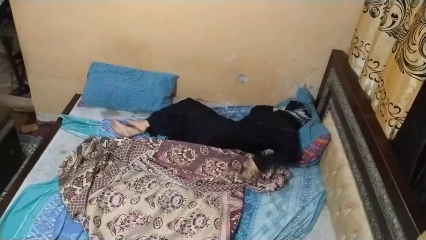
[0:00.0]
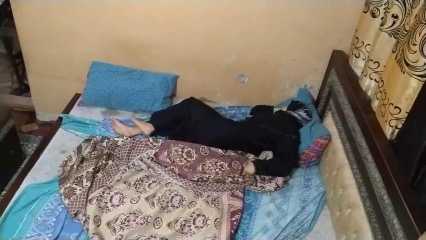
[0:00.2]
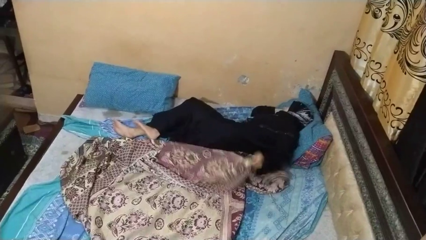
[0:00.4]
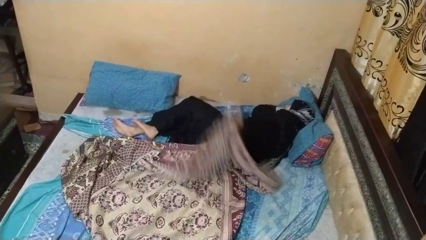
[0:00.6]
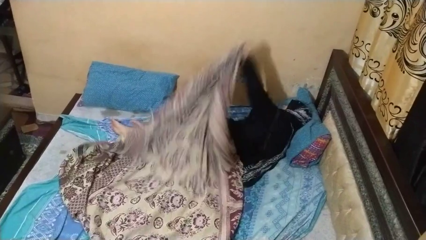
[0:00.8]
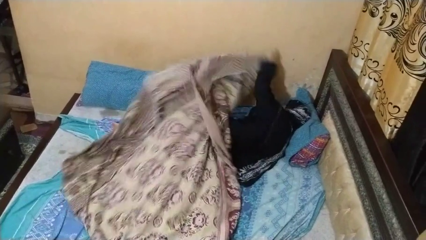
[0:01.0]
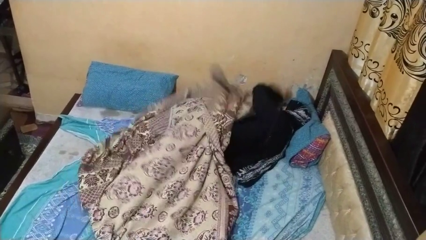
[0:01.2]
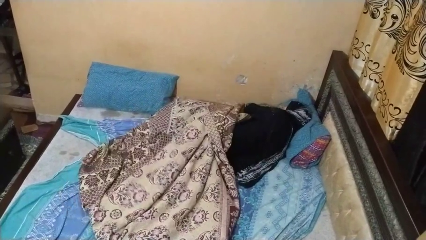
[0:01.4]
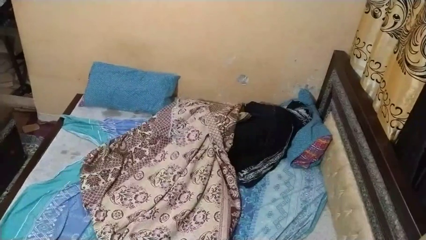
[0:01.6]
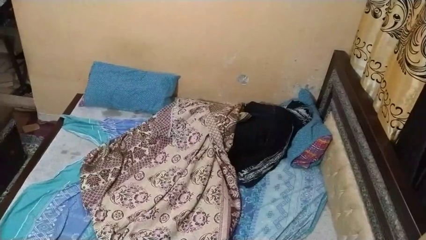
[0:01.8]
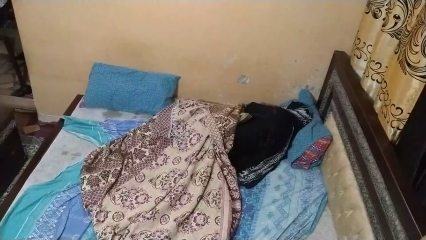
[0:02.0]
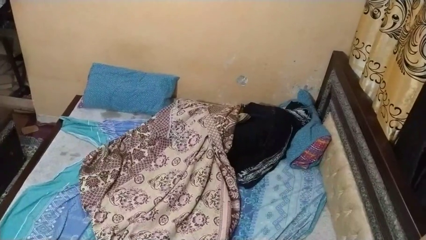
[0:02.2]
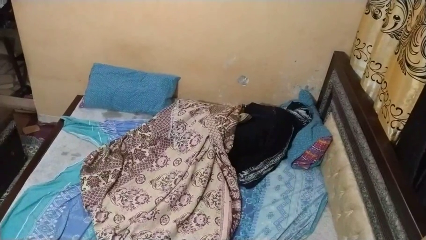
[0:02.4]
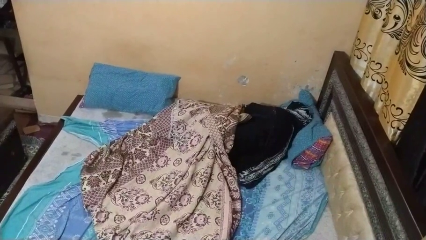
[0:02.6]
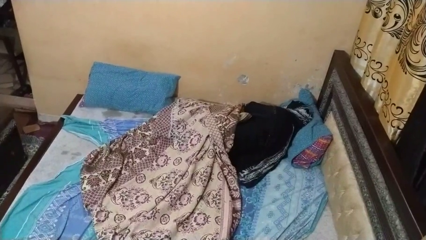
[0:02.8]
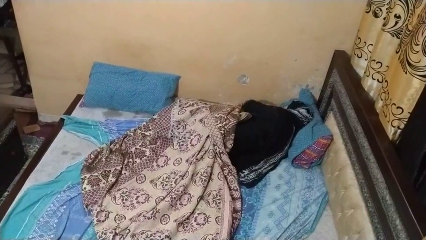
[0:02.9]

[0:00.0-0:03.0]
person covers with blanket

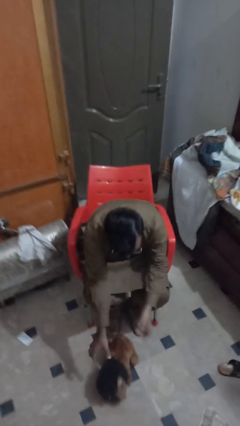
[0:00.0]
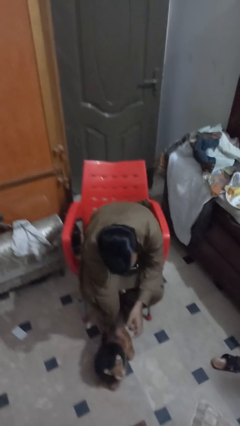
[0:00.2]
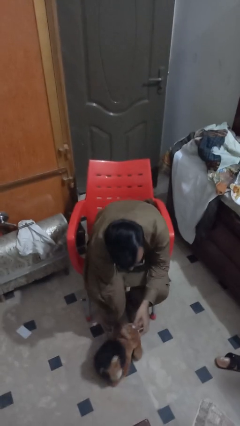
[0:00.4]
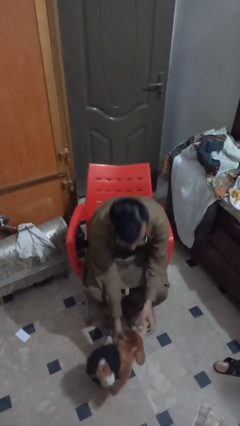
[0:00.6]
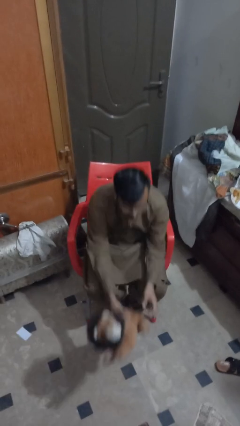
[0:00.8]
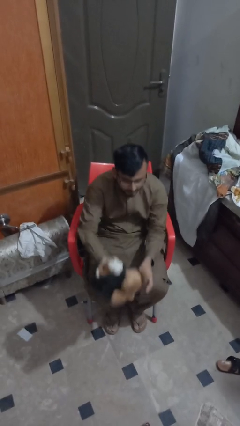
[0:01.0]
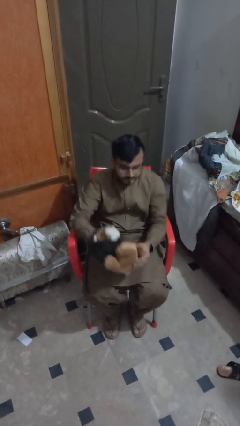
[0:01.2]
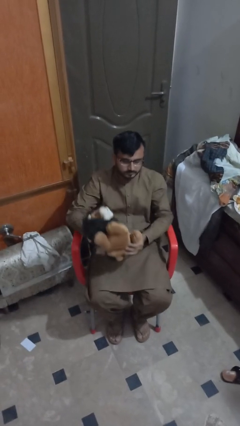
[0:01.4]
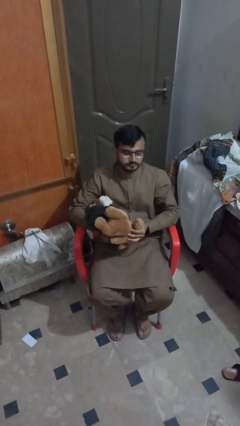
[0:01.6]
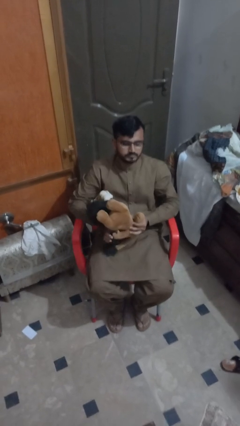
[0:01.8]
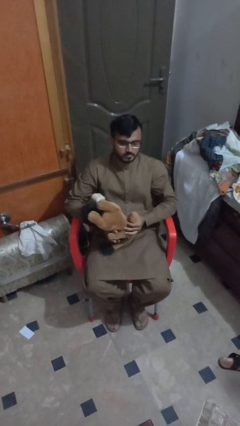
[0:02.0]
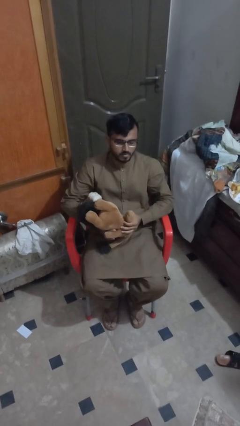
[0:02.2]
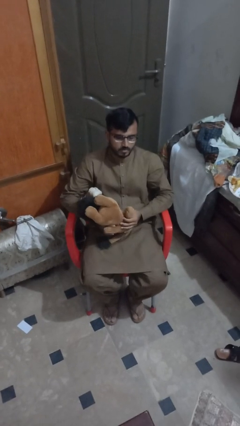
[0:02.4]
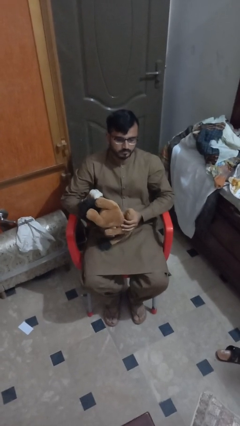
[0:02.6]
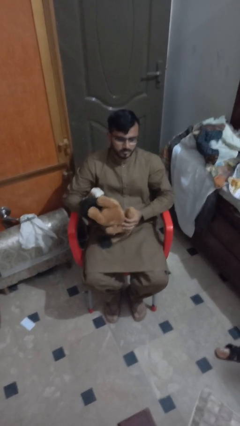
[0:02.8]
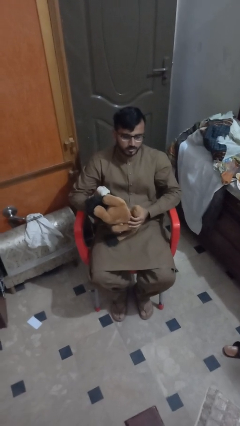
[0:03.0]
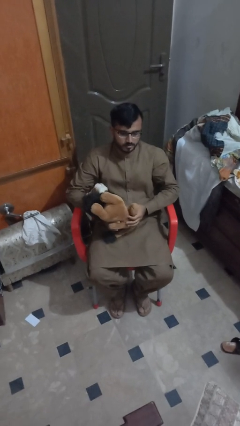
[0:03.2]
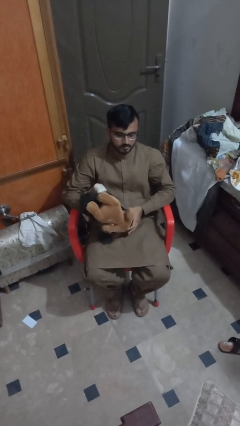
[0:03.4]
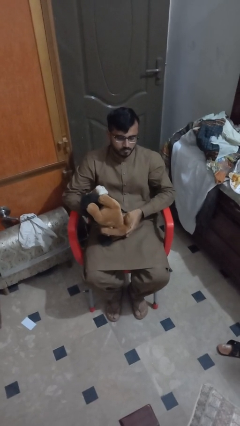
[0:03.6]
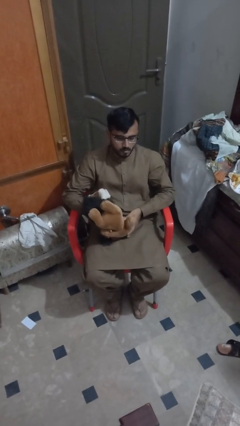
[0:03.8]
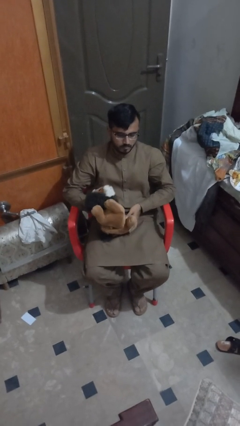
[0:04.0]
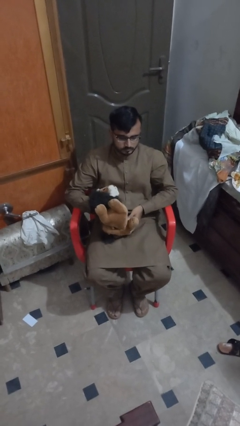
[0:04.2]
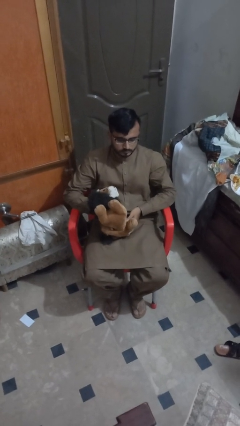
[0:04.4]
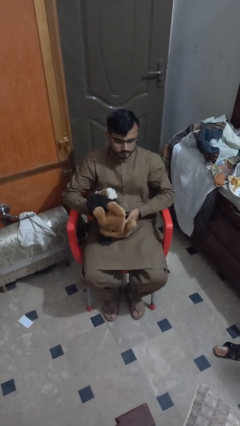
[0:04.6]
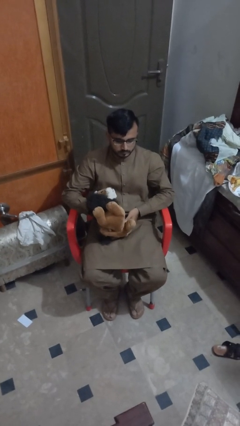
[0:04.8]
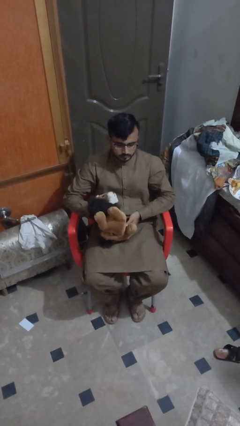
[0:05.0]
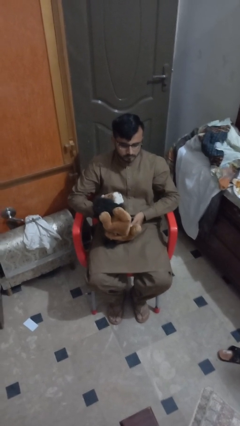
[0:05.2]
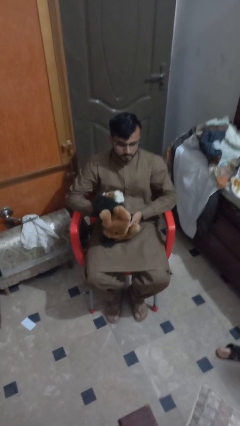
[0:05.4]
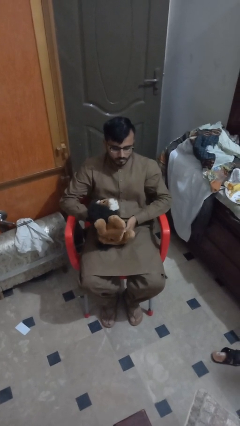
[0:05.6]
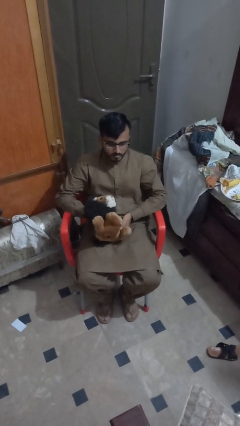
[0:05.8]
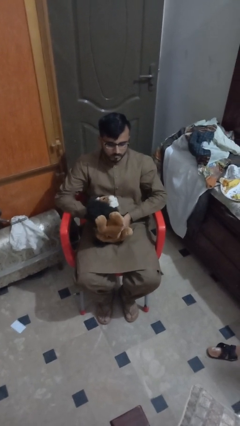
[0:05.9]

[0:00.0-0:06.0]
person picks up object from floor

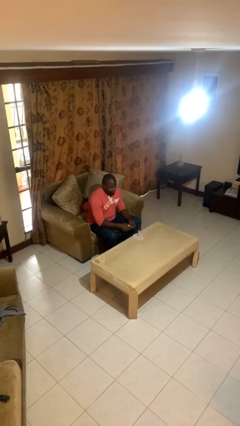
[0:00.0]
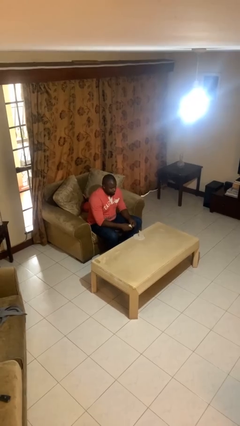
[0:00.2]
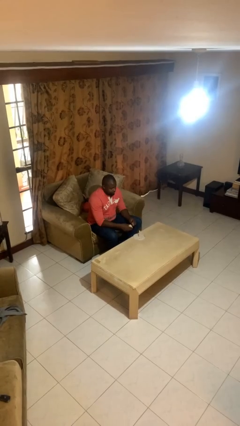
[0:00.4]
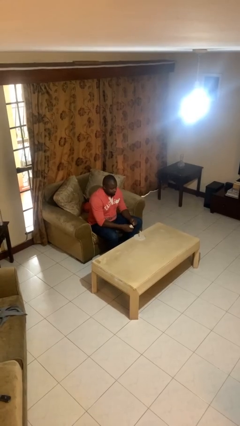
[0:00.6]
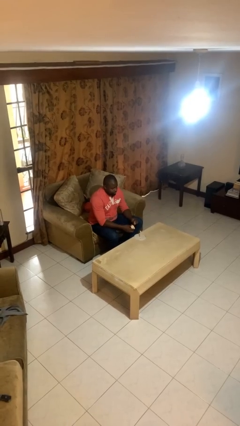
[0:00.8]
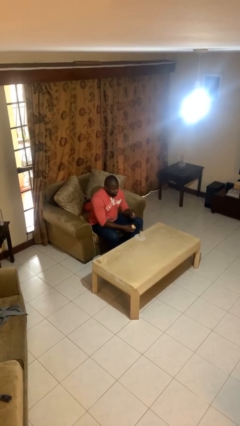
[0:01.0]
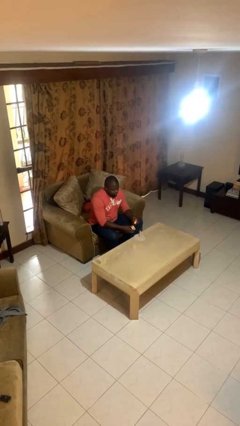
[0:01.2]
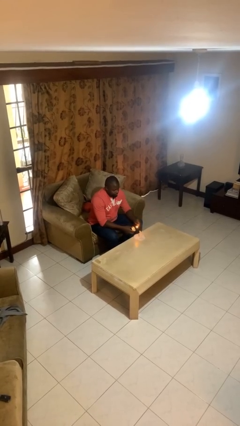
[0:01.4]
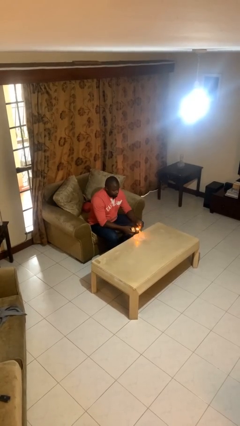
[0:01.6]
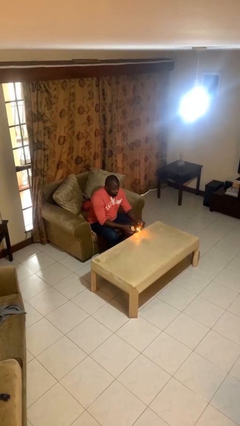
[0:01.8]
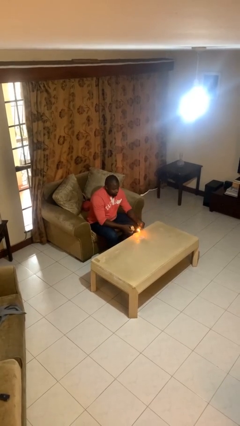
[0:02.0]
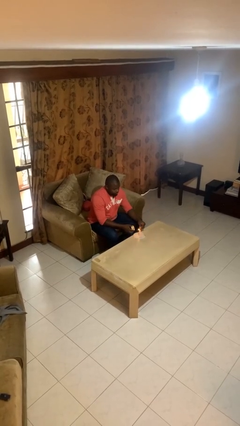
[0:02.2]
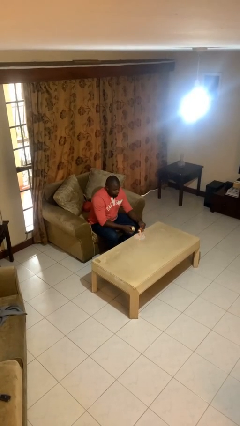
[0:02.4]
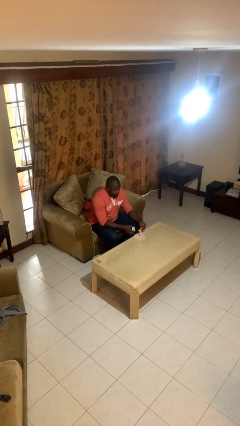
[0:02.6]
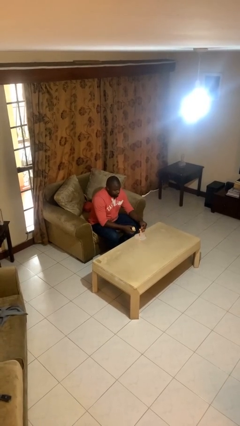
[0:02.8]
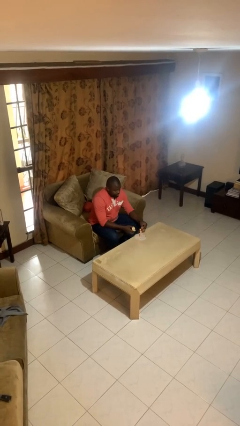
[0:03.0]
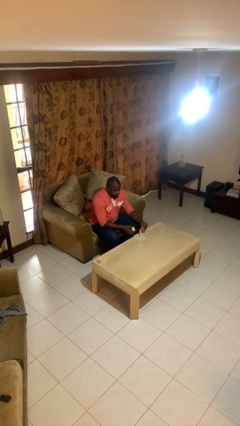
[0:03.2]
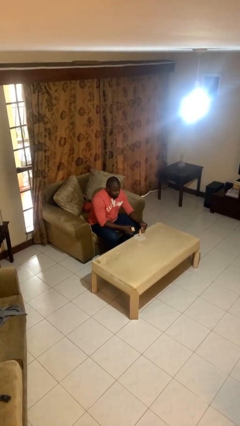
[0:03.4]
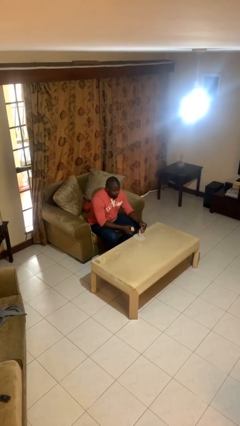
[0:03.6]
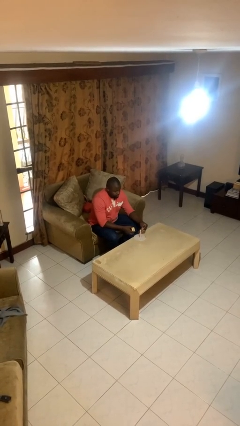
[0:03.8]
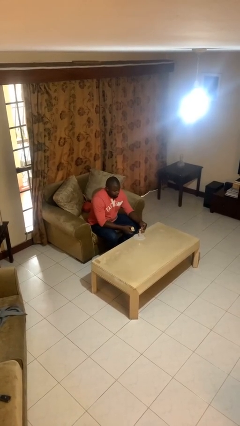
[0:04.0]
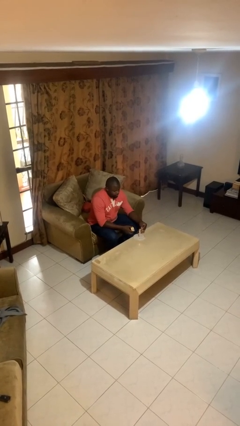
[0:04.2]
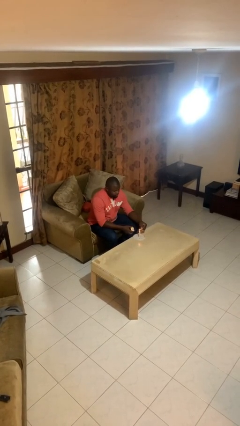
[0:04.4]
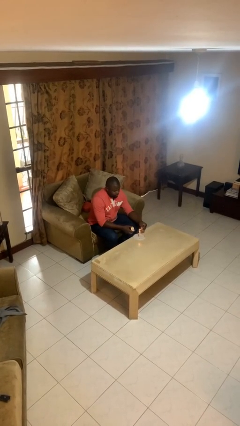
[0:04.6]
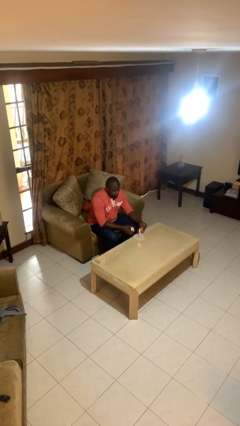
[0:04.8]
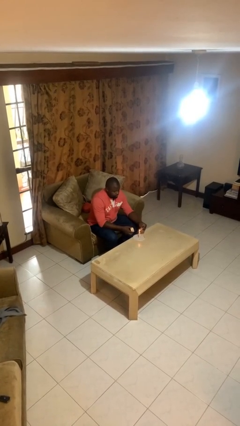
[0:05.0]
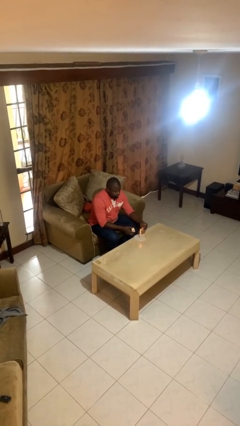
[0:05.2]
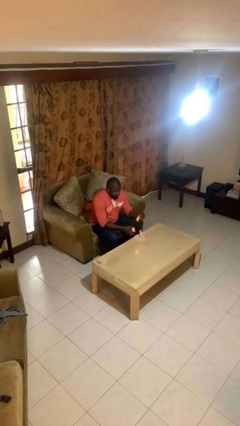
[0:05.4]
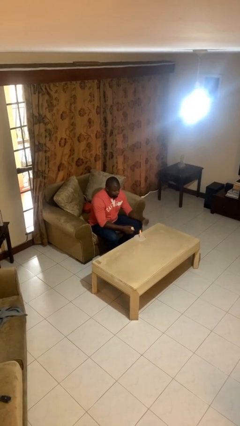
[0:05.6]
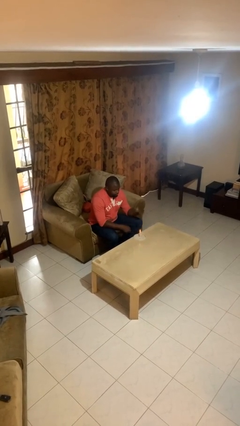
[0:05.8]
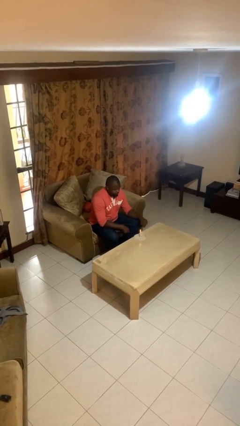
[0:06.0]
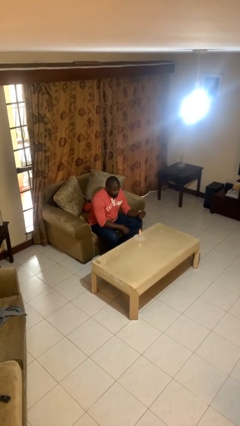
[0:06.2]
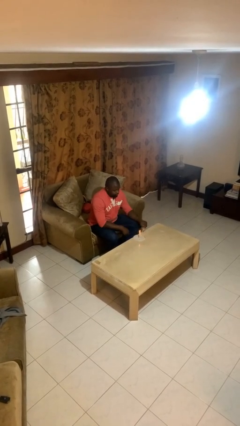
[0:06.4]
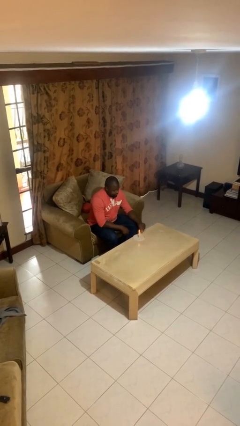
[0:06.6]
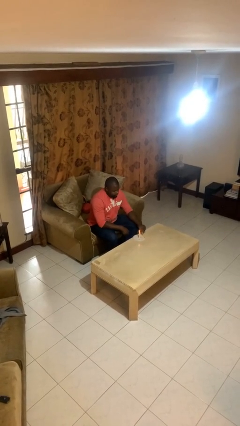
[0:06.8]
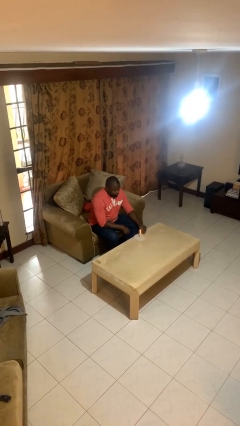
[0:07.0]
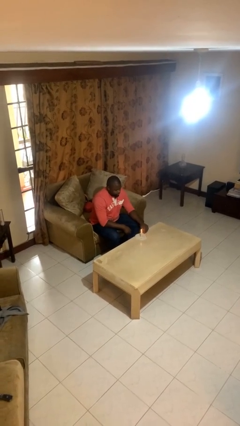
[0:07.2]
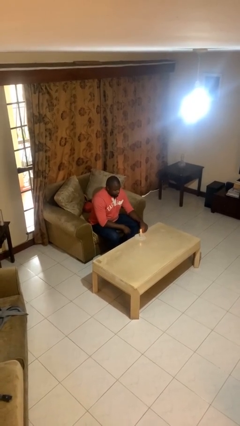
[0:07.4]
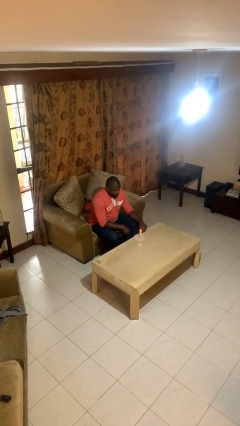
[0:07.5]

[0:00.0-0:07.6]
person lights candle

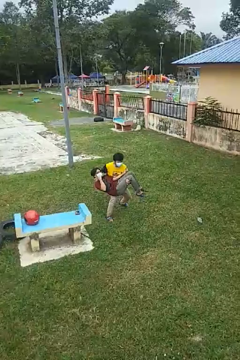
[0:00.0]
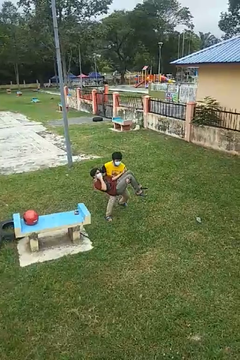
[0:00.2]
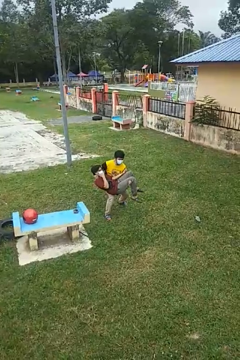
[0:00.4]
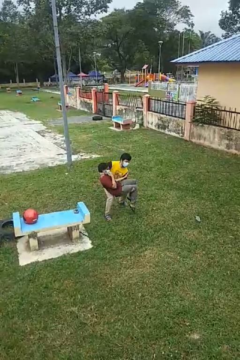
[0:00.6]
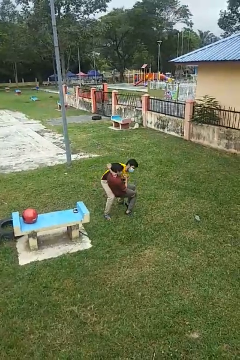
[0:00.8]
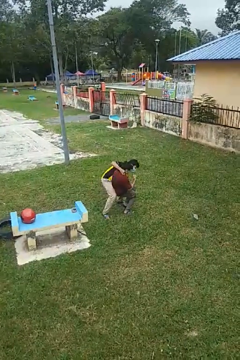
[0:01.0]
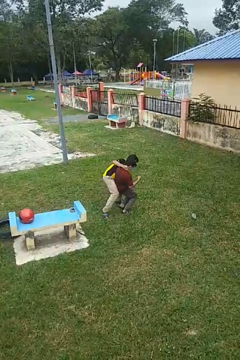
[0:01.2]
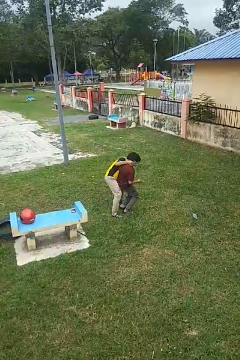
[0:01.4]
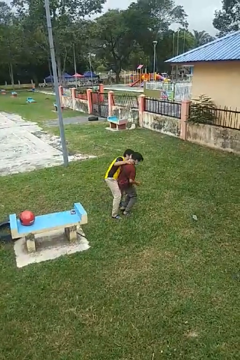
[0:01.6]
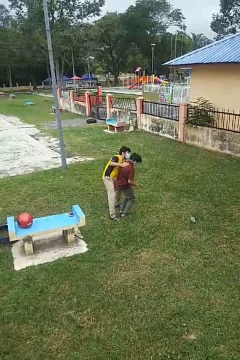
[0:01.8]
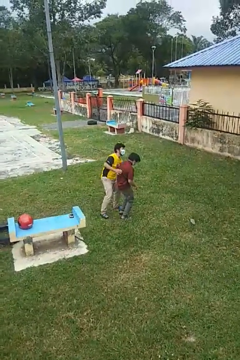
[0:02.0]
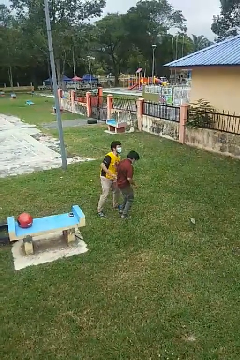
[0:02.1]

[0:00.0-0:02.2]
person puts down person
